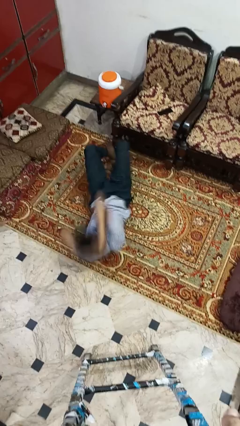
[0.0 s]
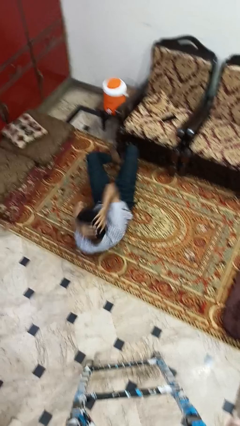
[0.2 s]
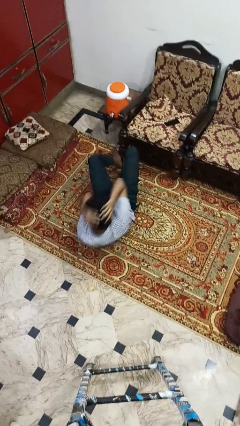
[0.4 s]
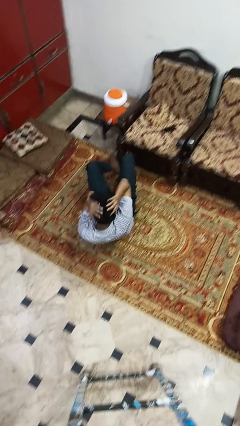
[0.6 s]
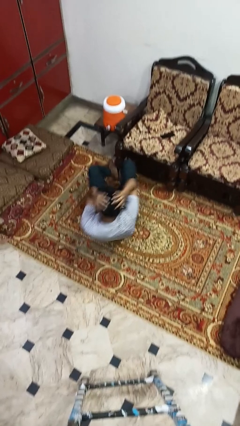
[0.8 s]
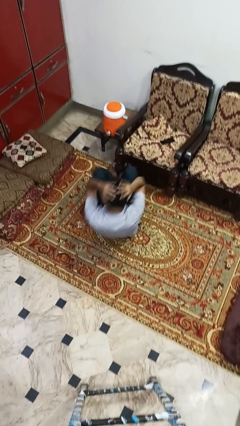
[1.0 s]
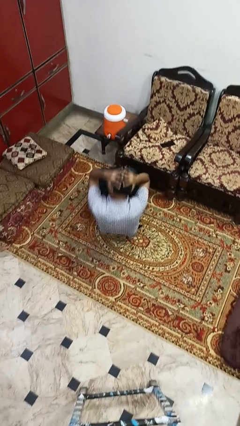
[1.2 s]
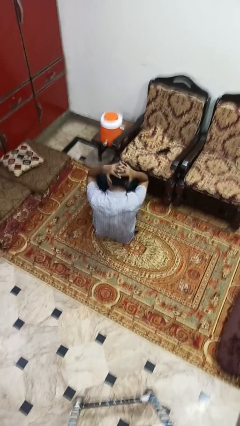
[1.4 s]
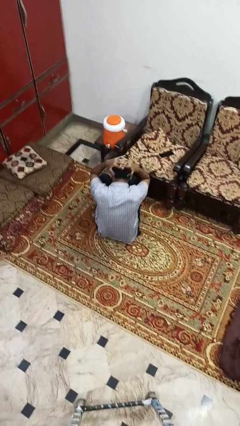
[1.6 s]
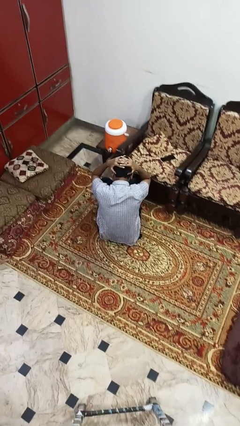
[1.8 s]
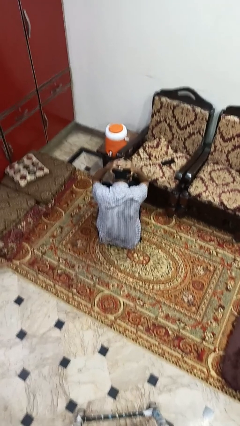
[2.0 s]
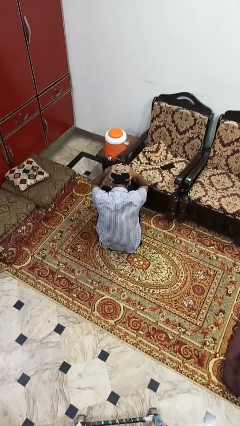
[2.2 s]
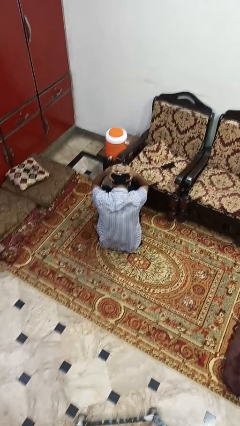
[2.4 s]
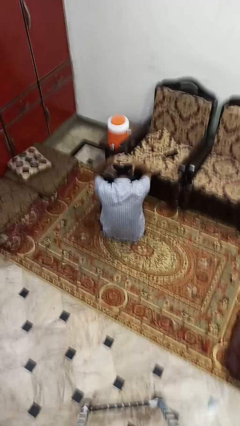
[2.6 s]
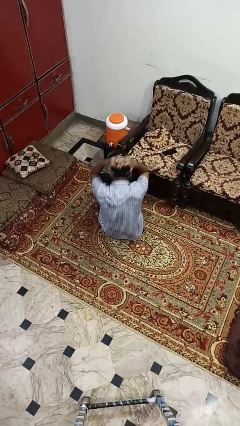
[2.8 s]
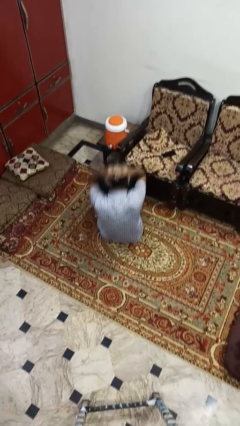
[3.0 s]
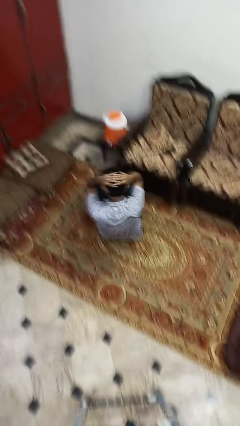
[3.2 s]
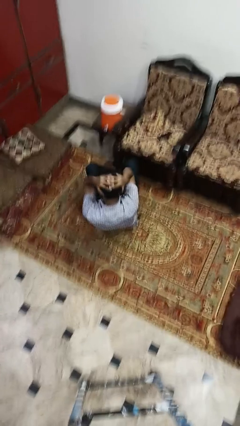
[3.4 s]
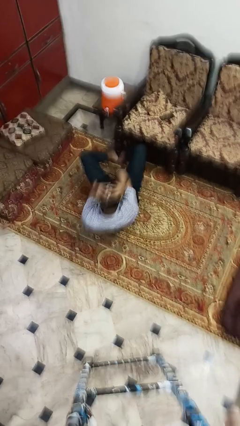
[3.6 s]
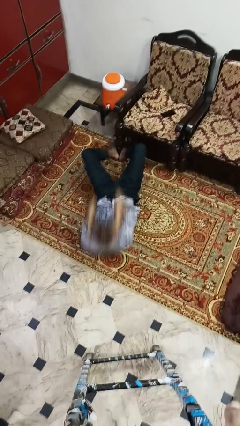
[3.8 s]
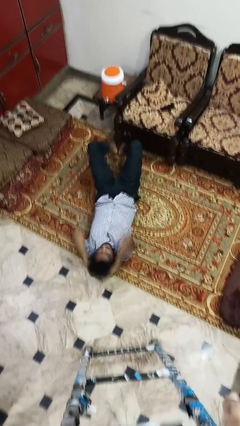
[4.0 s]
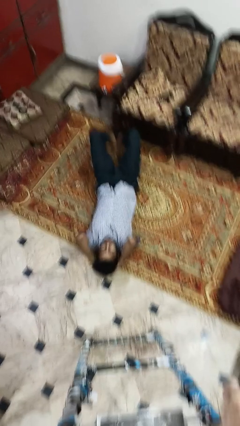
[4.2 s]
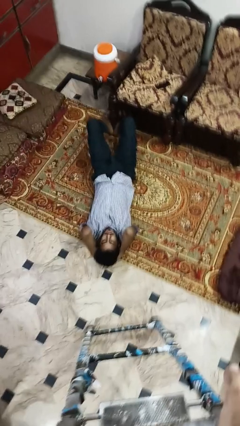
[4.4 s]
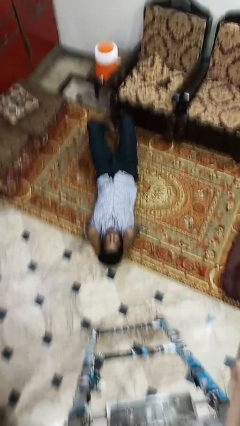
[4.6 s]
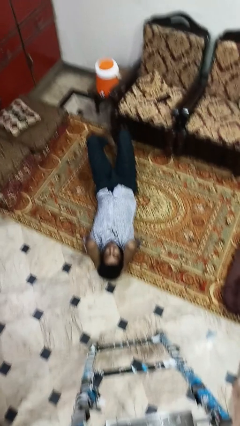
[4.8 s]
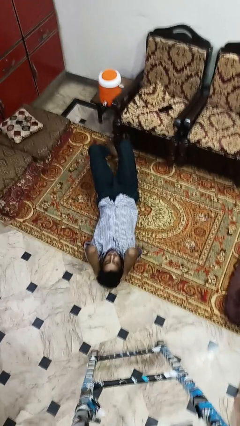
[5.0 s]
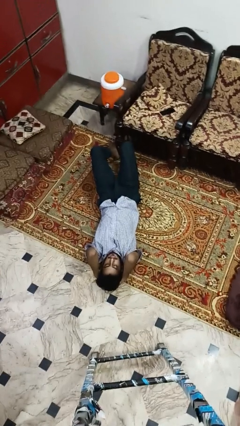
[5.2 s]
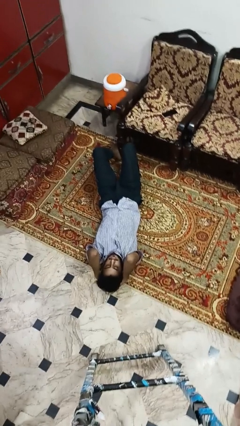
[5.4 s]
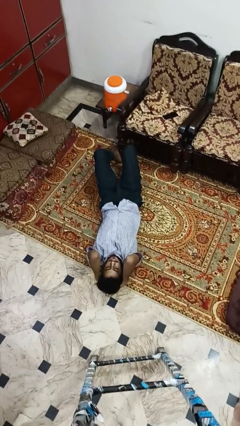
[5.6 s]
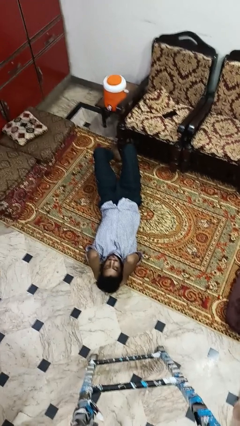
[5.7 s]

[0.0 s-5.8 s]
person exercises with situp

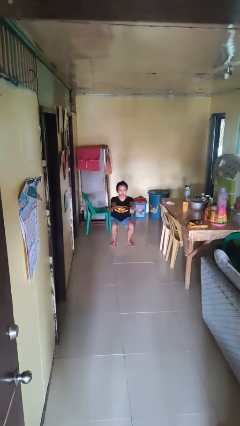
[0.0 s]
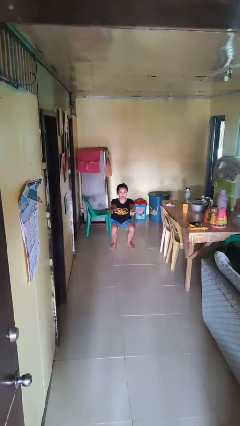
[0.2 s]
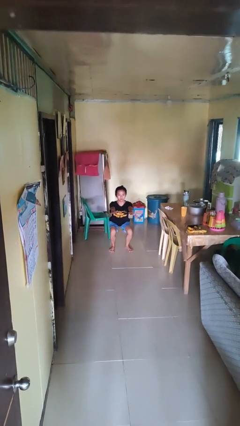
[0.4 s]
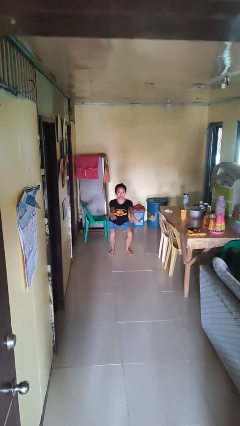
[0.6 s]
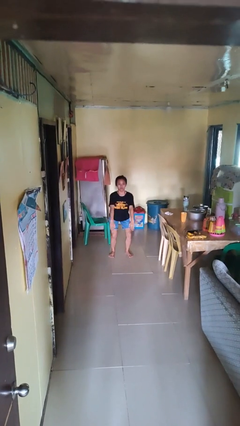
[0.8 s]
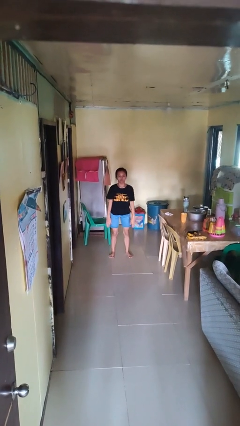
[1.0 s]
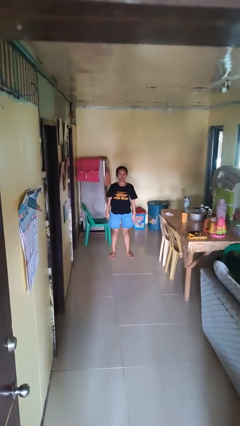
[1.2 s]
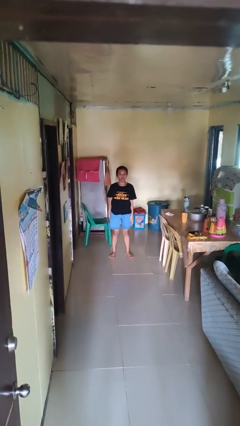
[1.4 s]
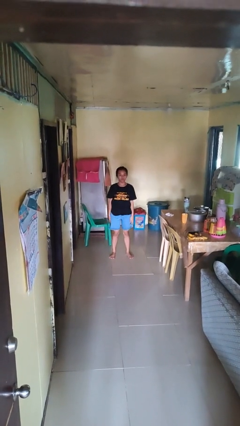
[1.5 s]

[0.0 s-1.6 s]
person stands up

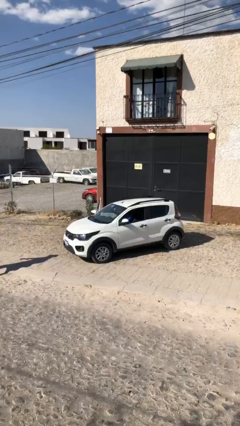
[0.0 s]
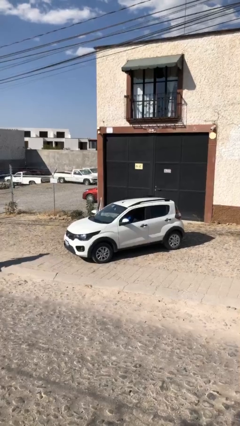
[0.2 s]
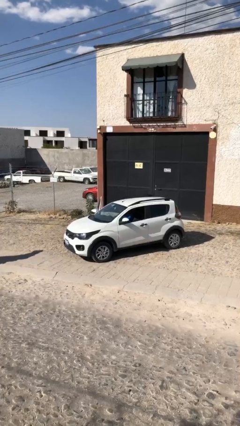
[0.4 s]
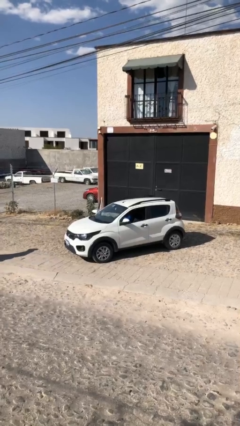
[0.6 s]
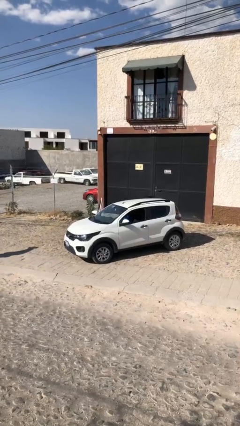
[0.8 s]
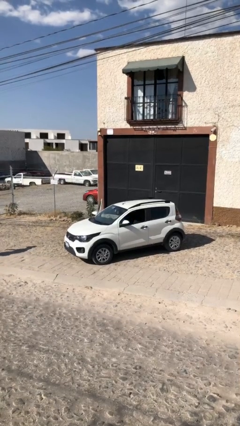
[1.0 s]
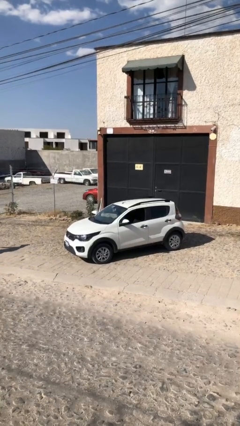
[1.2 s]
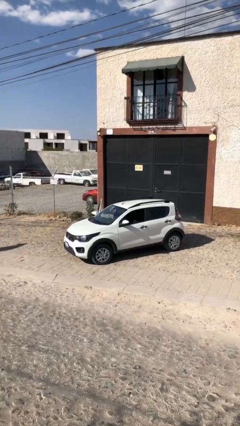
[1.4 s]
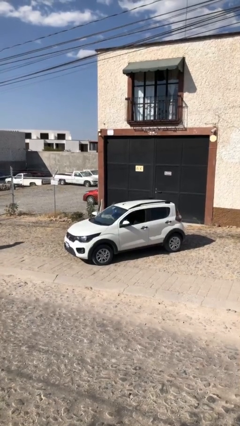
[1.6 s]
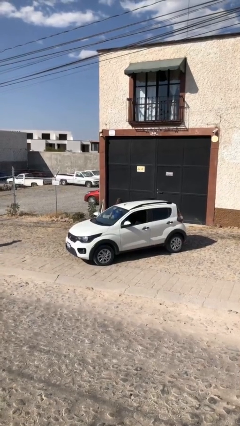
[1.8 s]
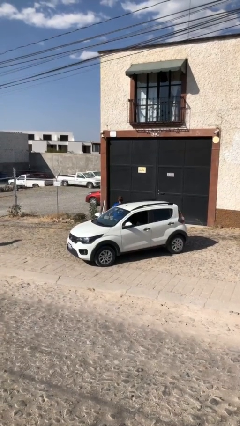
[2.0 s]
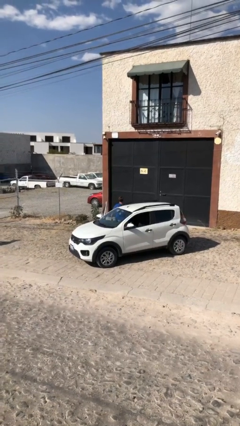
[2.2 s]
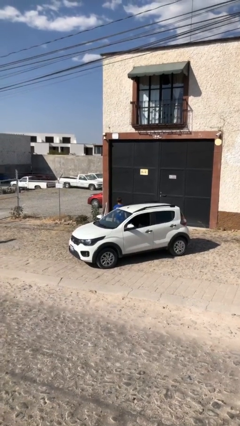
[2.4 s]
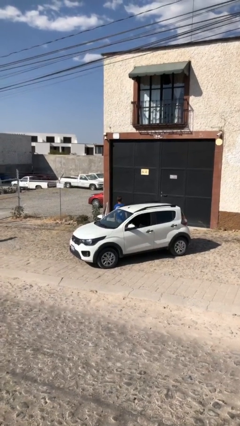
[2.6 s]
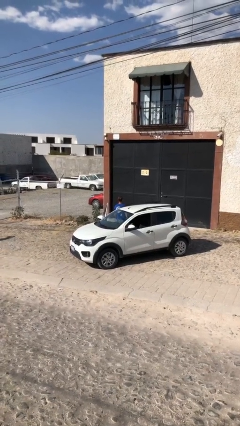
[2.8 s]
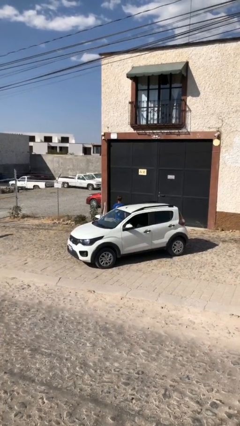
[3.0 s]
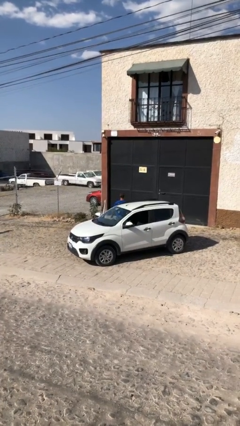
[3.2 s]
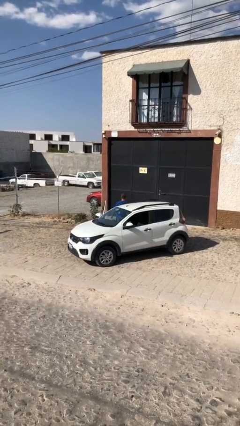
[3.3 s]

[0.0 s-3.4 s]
person exits car

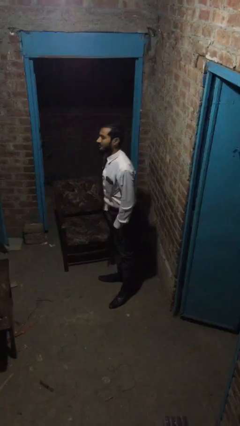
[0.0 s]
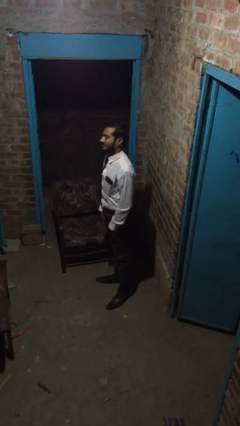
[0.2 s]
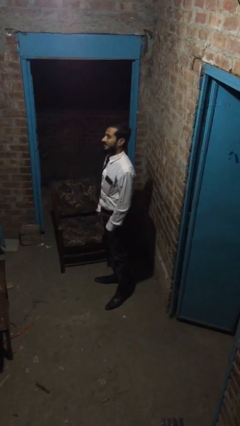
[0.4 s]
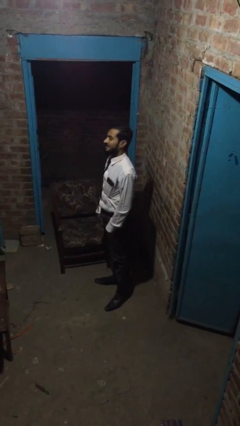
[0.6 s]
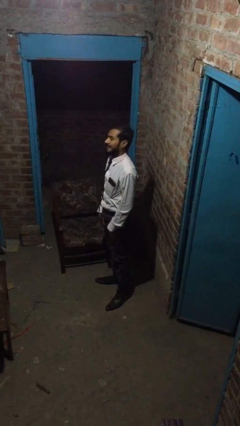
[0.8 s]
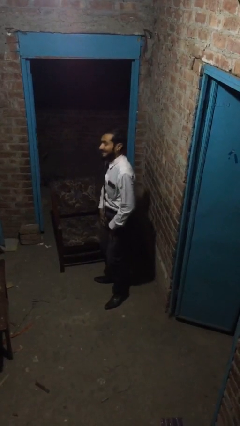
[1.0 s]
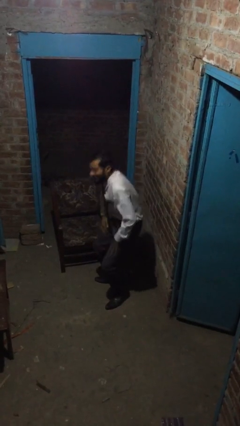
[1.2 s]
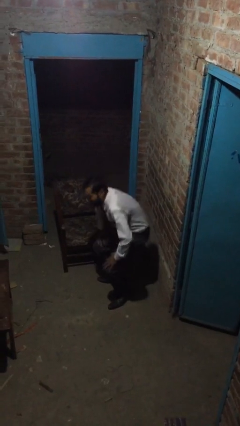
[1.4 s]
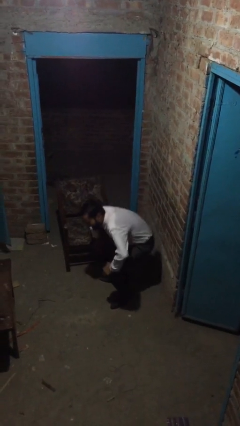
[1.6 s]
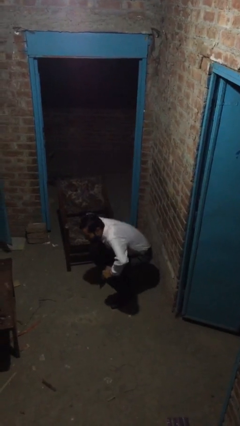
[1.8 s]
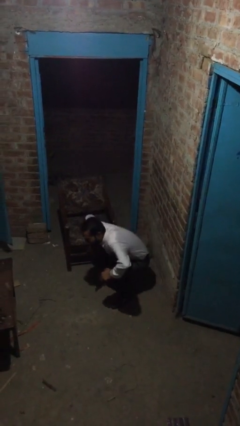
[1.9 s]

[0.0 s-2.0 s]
person sits down

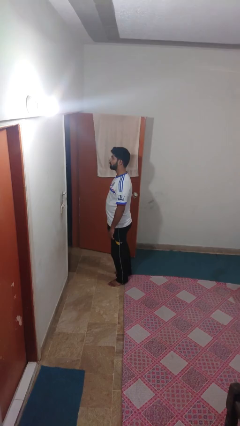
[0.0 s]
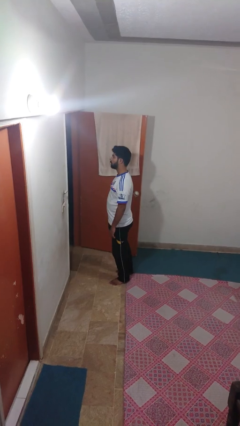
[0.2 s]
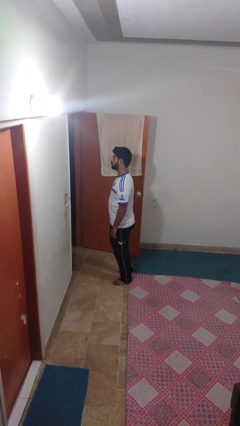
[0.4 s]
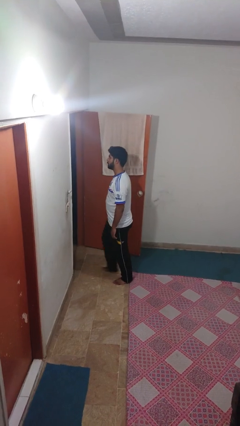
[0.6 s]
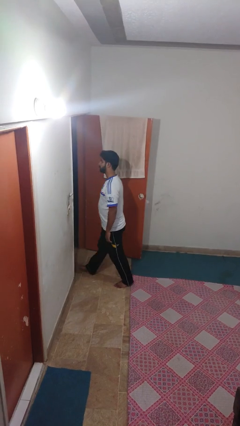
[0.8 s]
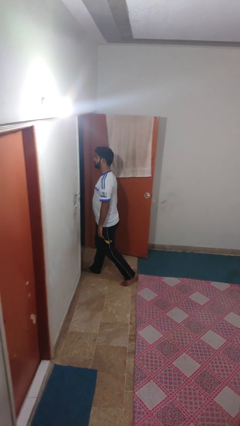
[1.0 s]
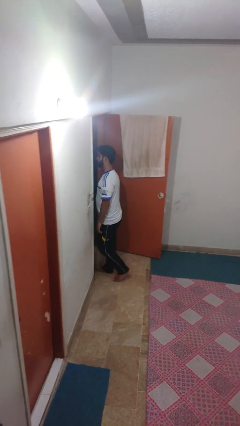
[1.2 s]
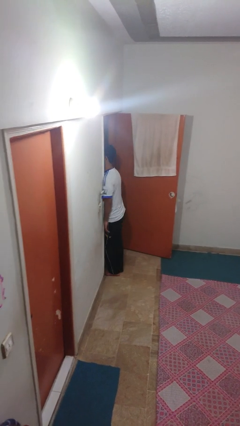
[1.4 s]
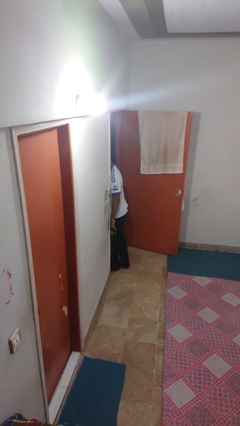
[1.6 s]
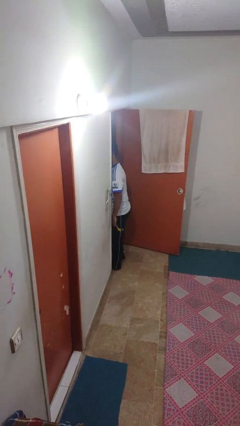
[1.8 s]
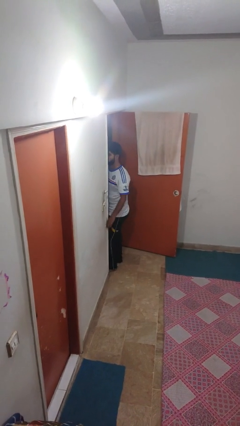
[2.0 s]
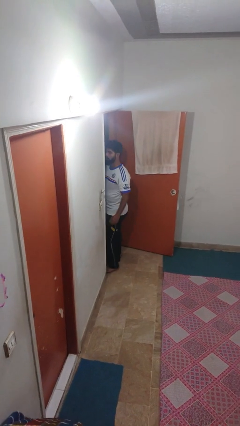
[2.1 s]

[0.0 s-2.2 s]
person bumps into wall

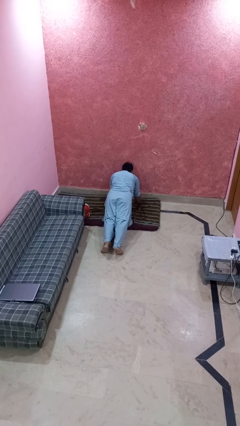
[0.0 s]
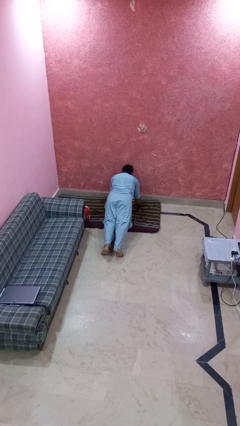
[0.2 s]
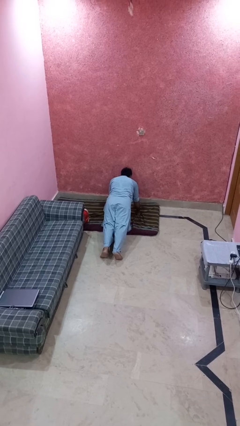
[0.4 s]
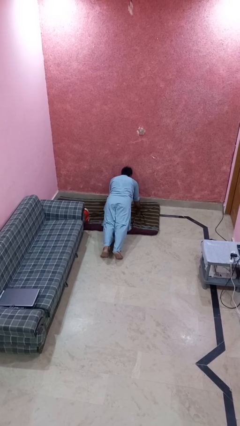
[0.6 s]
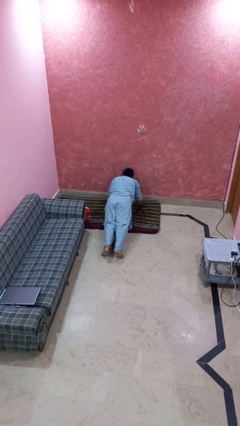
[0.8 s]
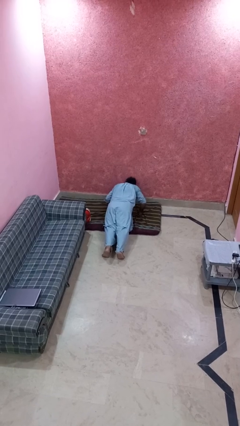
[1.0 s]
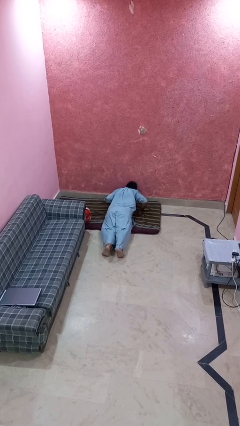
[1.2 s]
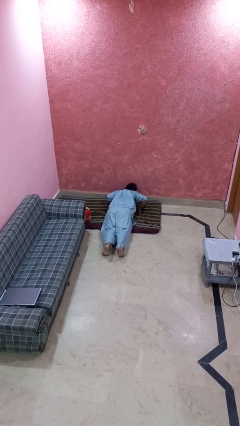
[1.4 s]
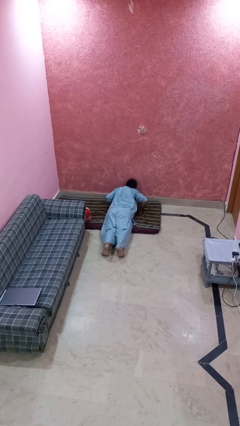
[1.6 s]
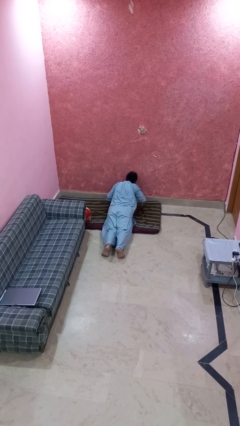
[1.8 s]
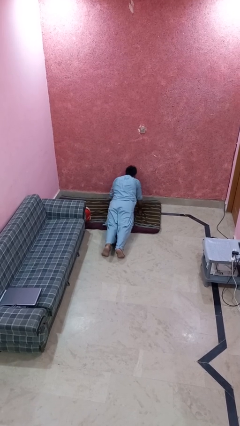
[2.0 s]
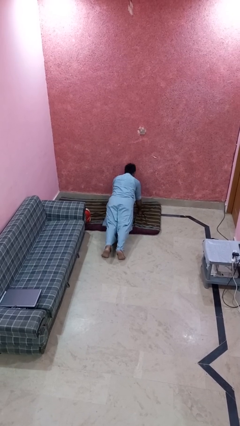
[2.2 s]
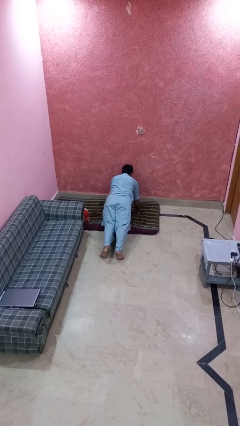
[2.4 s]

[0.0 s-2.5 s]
person exercises with pushup

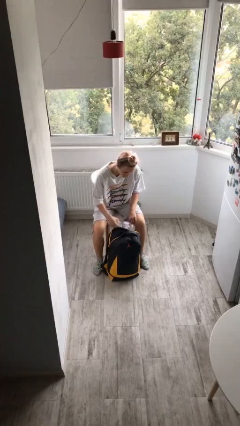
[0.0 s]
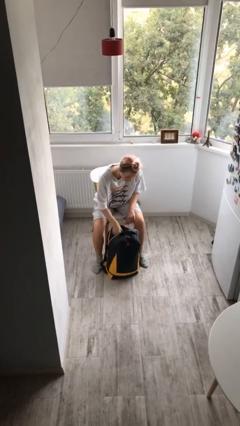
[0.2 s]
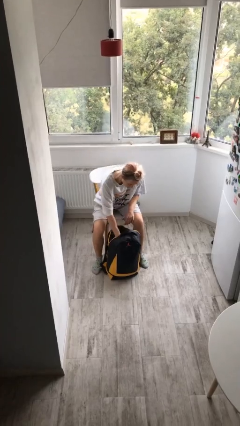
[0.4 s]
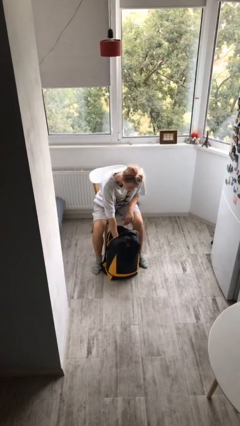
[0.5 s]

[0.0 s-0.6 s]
person puts object into backpack
